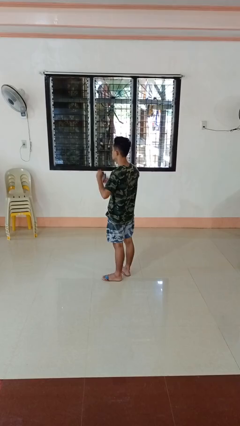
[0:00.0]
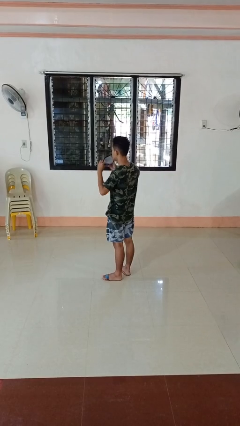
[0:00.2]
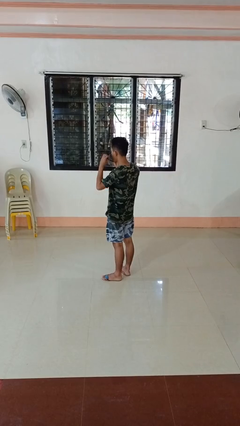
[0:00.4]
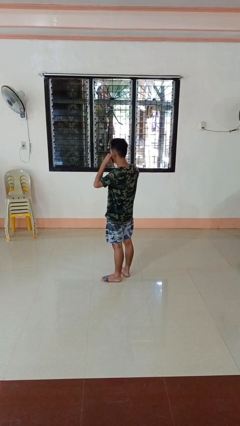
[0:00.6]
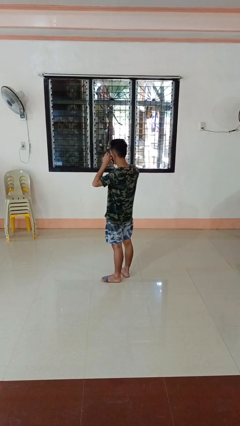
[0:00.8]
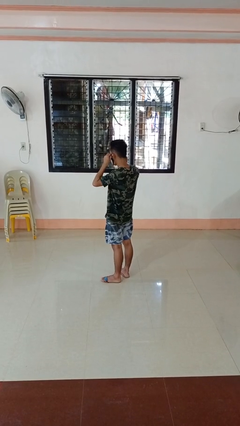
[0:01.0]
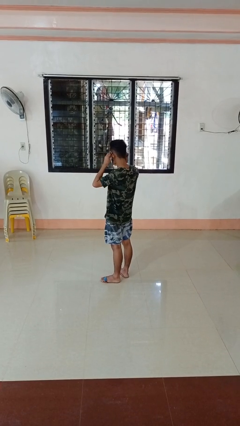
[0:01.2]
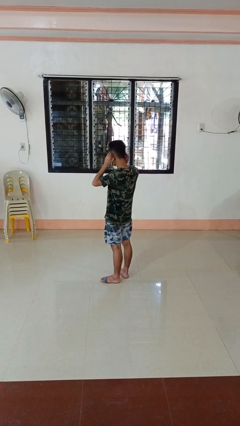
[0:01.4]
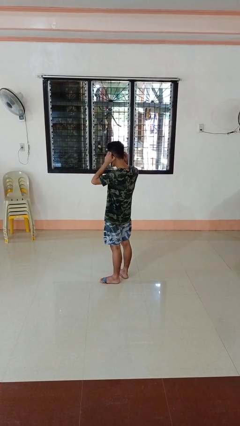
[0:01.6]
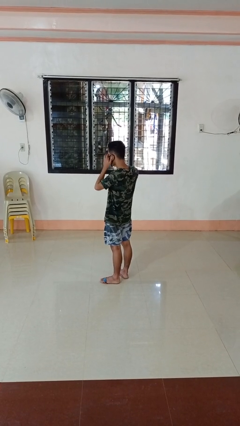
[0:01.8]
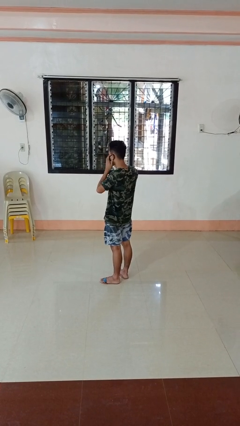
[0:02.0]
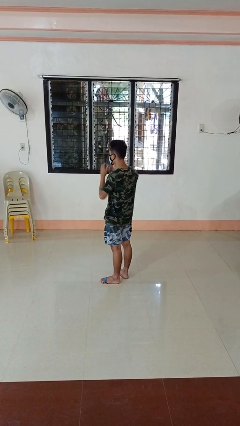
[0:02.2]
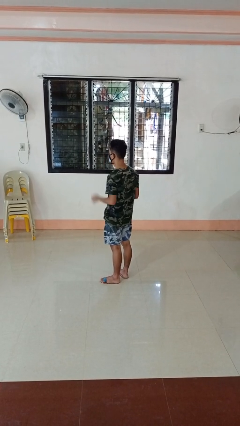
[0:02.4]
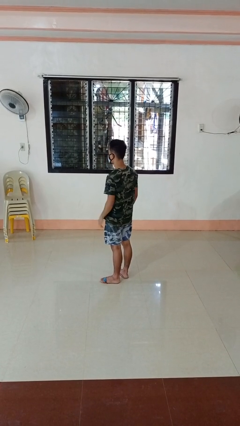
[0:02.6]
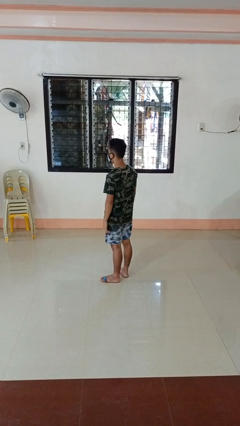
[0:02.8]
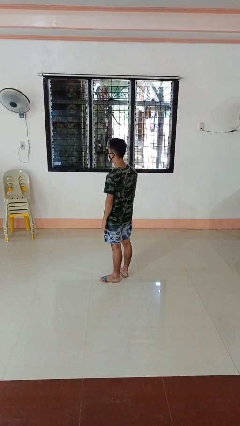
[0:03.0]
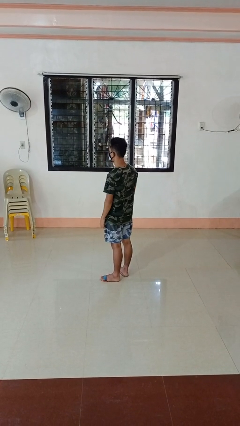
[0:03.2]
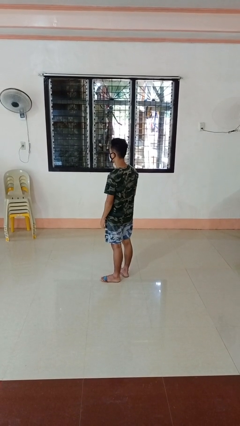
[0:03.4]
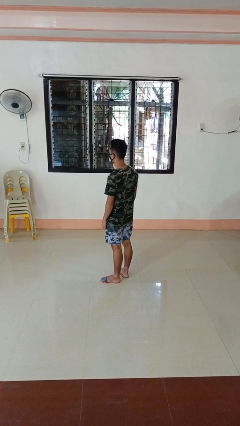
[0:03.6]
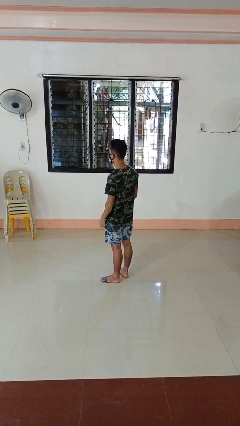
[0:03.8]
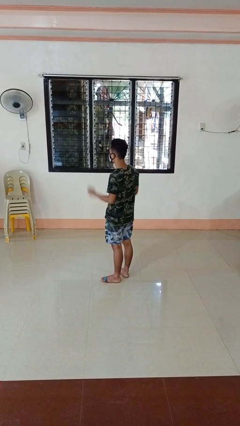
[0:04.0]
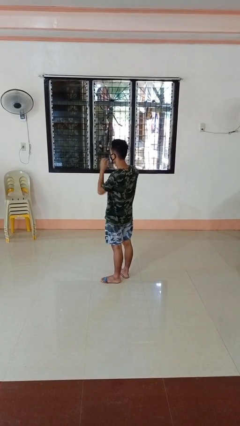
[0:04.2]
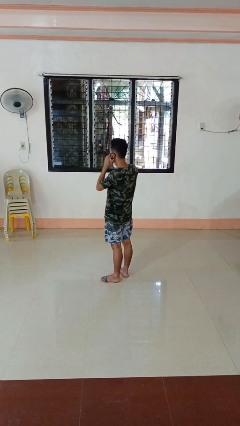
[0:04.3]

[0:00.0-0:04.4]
person puts on facemask

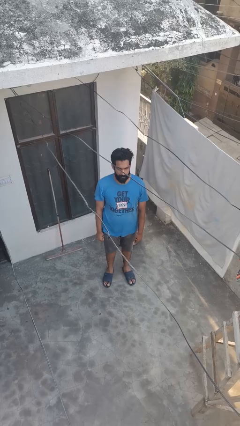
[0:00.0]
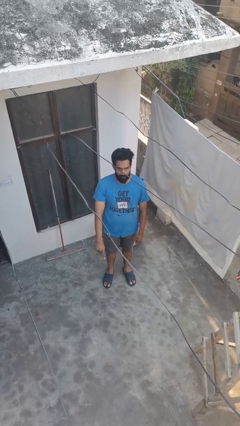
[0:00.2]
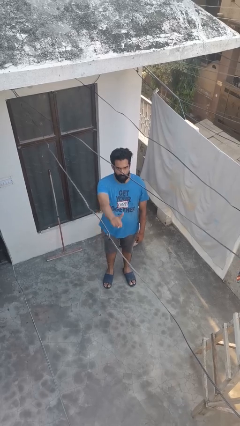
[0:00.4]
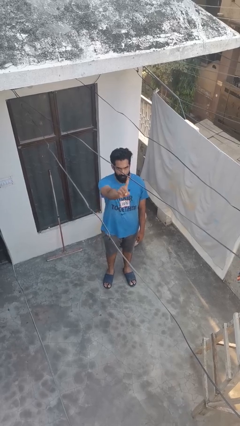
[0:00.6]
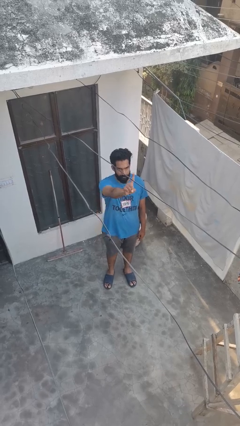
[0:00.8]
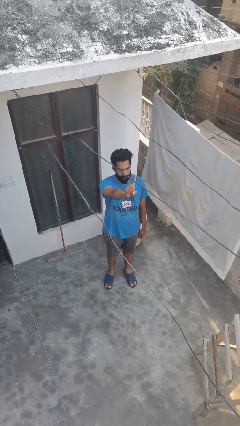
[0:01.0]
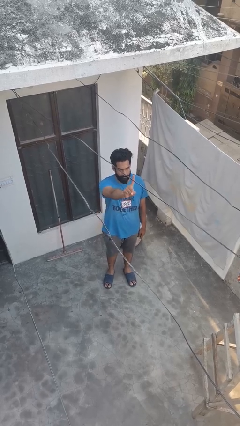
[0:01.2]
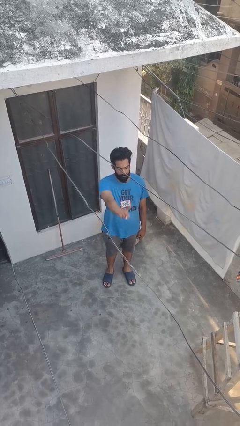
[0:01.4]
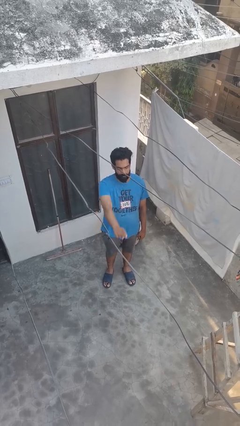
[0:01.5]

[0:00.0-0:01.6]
person gestures number one

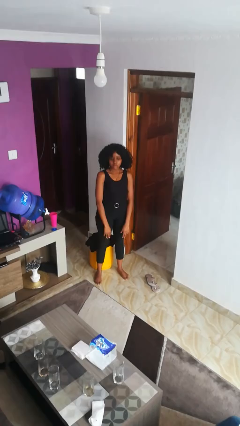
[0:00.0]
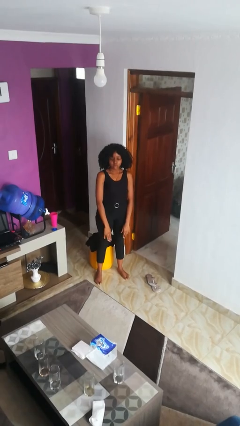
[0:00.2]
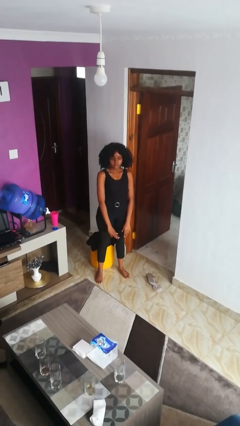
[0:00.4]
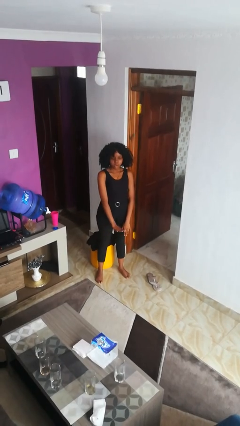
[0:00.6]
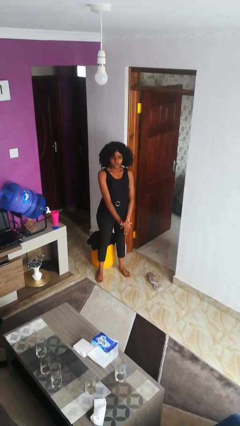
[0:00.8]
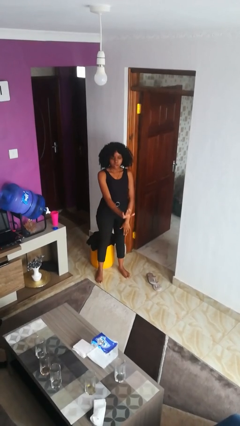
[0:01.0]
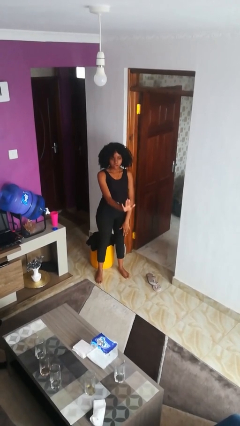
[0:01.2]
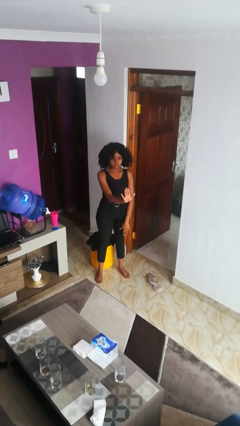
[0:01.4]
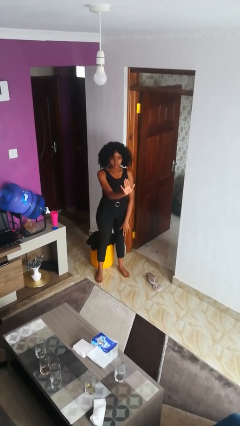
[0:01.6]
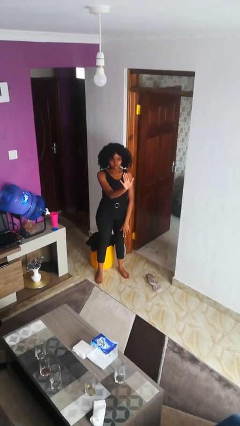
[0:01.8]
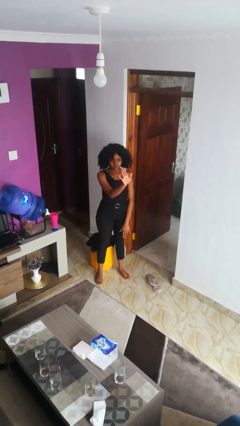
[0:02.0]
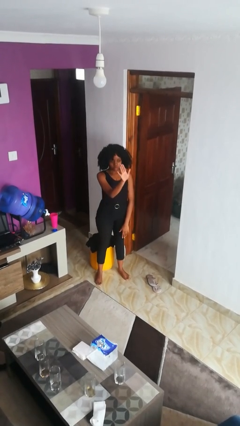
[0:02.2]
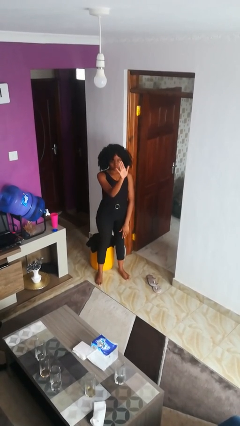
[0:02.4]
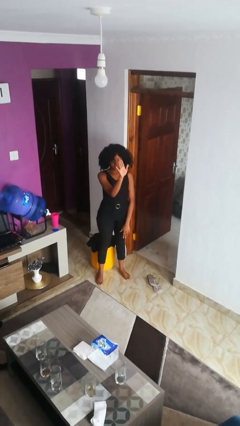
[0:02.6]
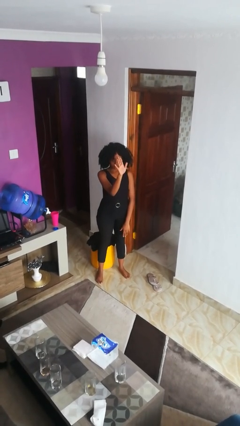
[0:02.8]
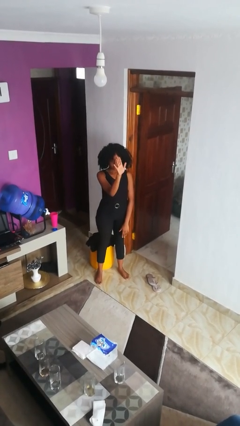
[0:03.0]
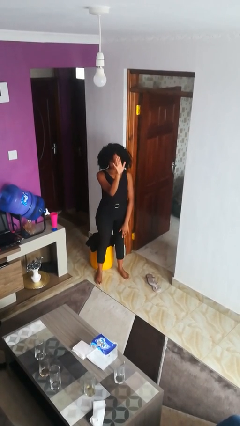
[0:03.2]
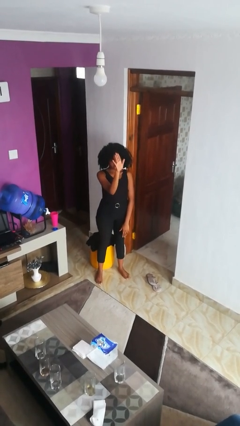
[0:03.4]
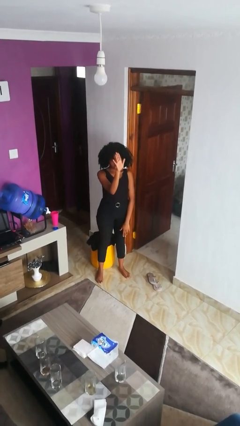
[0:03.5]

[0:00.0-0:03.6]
person gestures swipe up

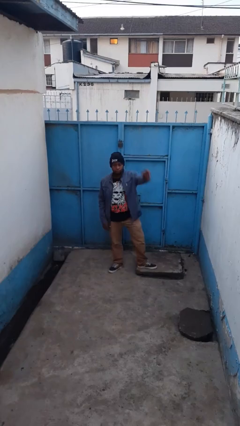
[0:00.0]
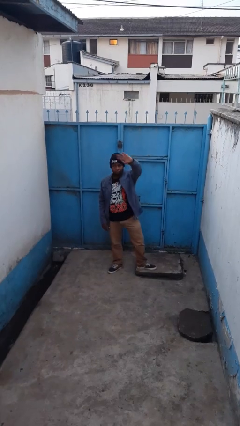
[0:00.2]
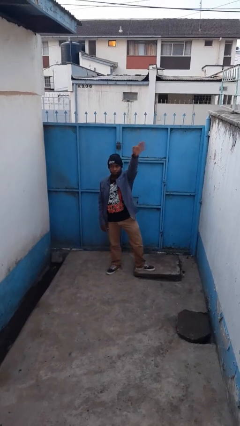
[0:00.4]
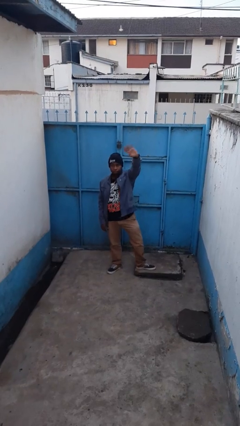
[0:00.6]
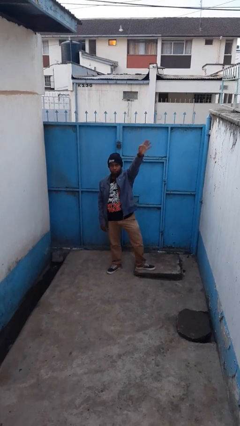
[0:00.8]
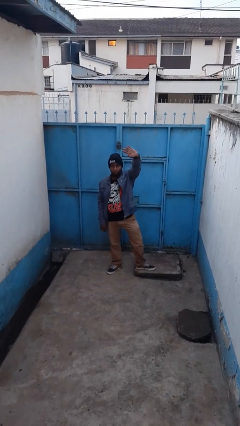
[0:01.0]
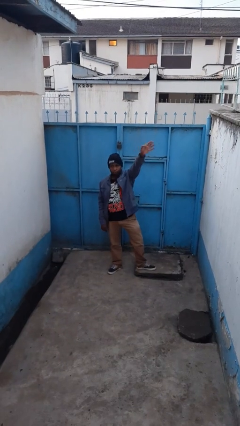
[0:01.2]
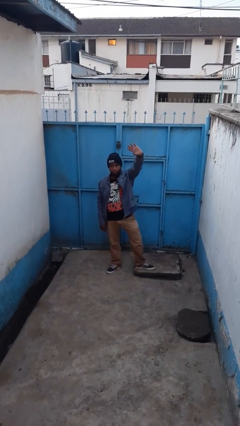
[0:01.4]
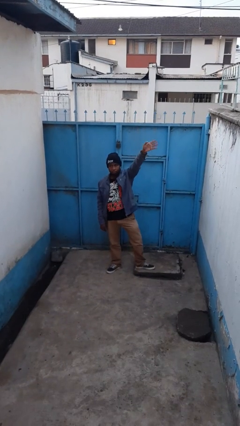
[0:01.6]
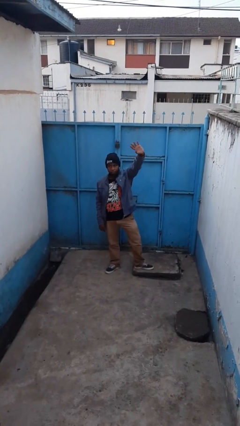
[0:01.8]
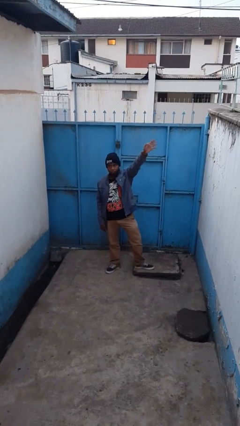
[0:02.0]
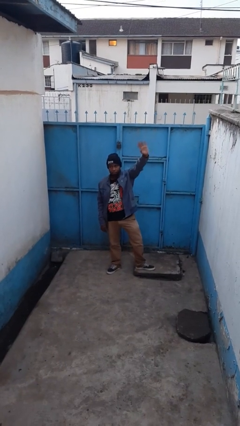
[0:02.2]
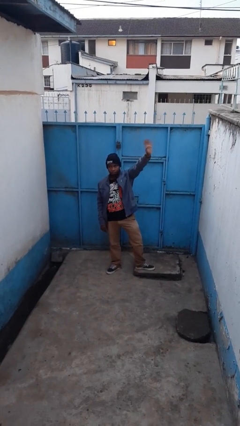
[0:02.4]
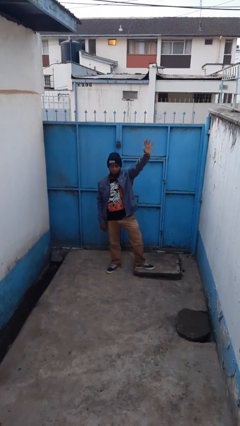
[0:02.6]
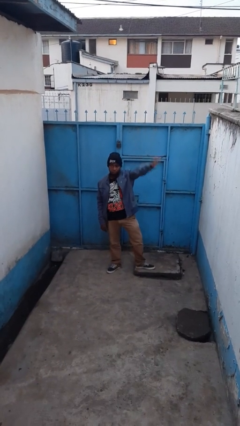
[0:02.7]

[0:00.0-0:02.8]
person waves at person

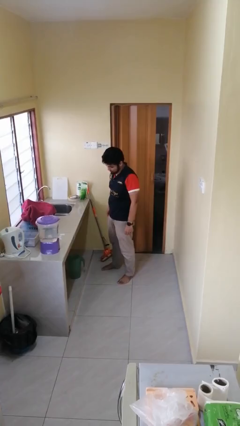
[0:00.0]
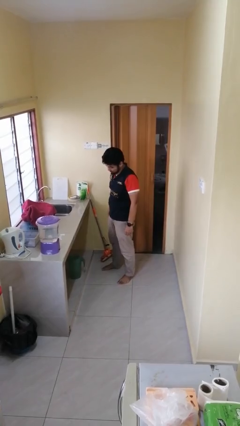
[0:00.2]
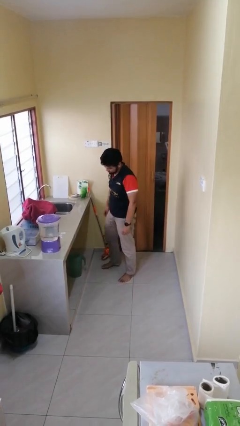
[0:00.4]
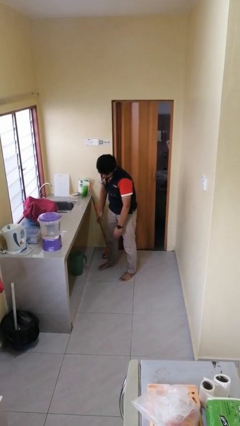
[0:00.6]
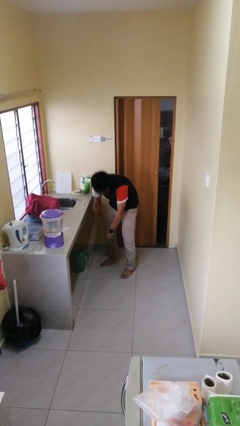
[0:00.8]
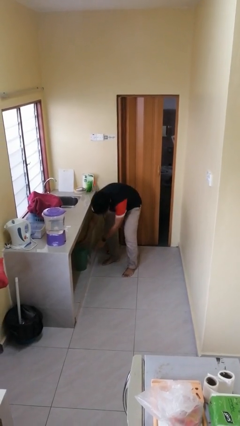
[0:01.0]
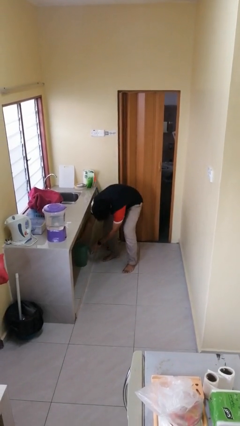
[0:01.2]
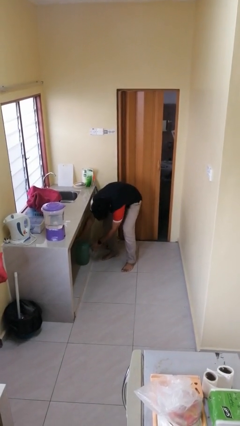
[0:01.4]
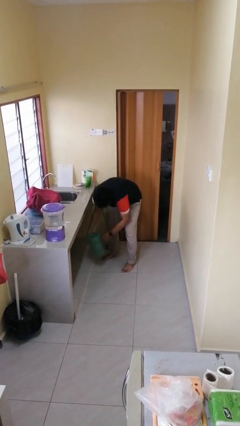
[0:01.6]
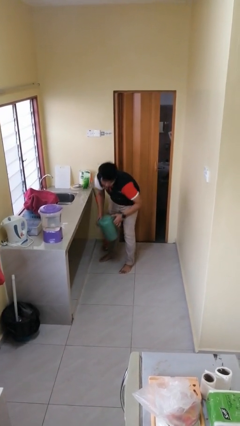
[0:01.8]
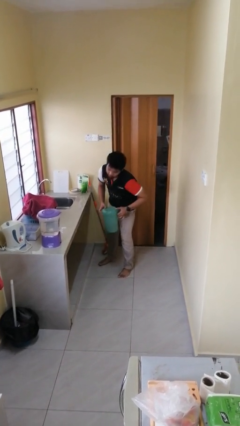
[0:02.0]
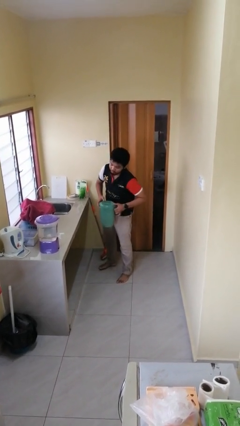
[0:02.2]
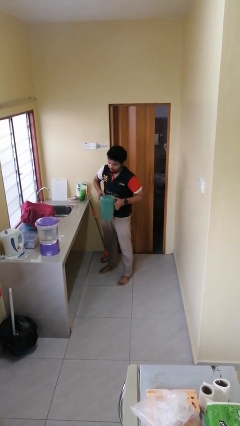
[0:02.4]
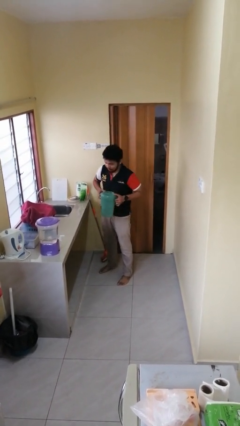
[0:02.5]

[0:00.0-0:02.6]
person picks up object from cabinet

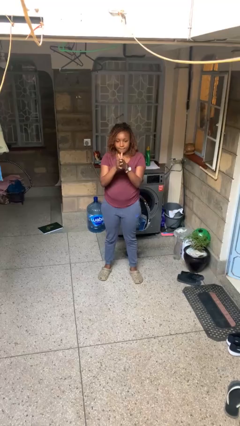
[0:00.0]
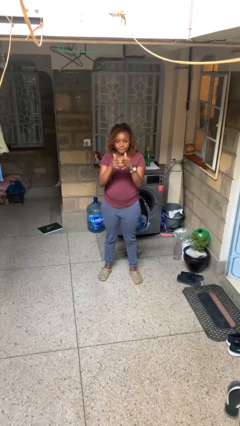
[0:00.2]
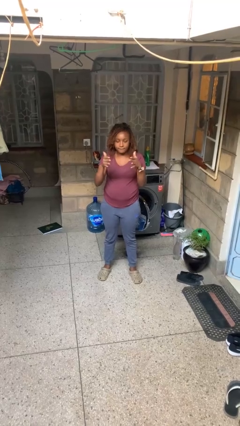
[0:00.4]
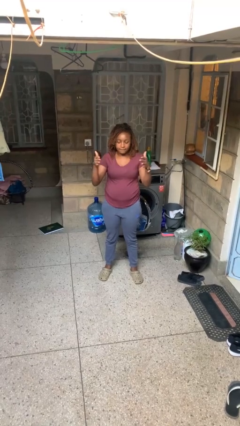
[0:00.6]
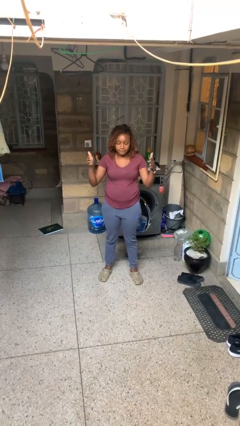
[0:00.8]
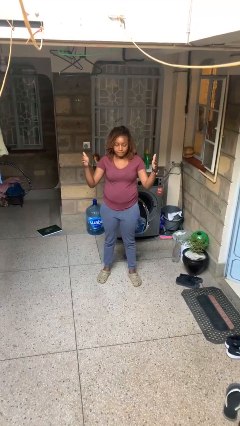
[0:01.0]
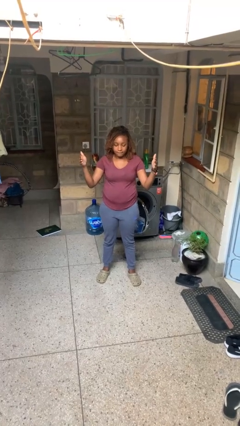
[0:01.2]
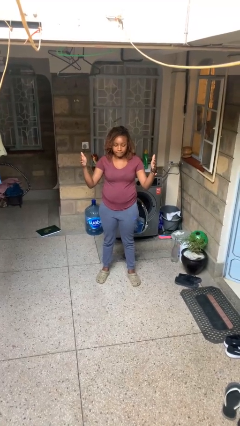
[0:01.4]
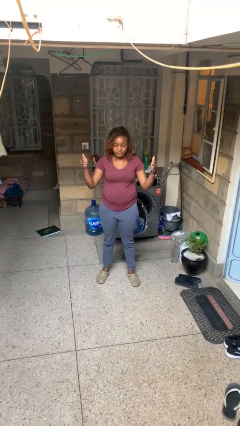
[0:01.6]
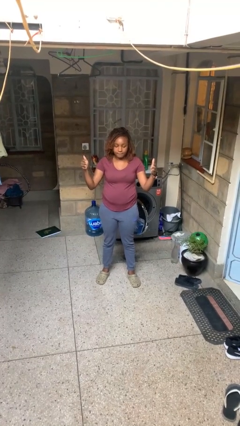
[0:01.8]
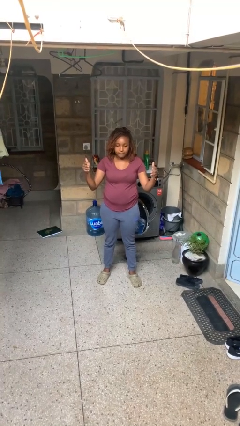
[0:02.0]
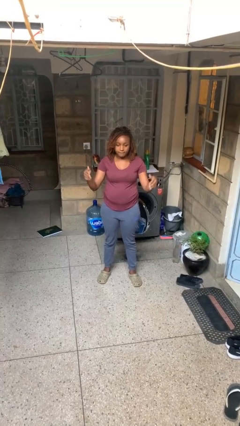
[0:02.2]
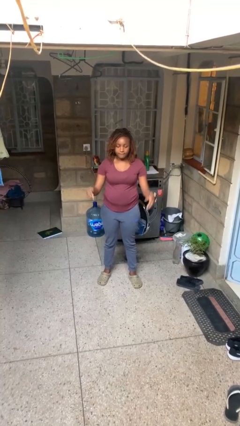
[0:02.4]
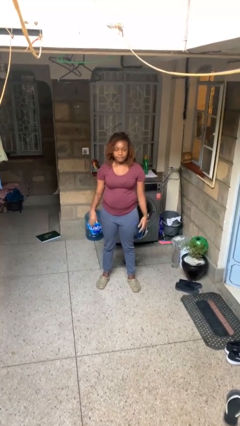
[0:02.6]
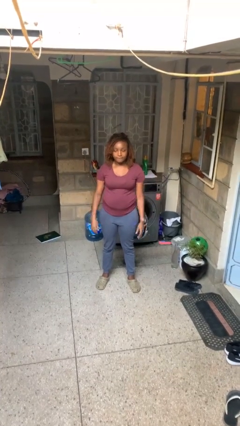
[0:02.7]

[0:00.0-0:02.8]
person gestures zoom out
